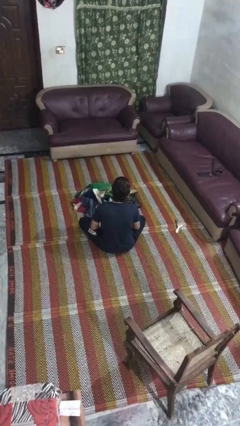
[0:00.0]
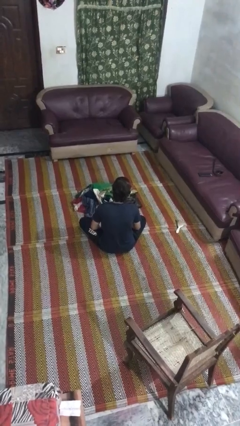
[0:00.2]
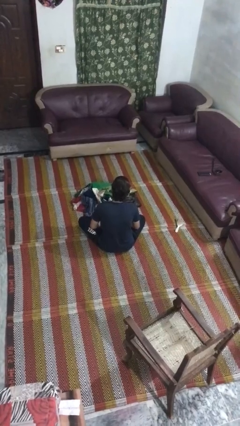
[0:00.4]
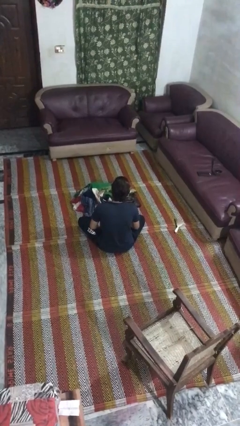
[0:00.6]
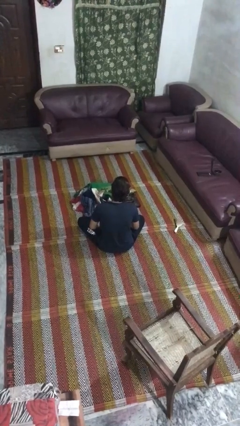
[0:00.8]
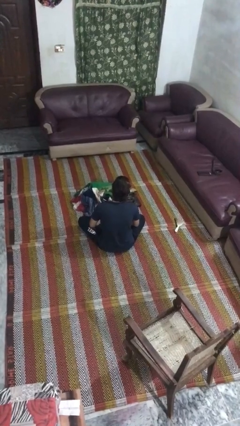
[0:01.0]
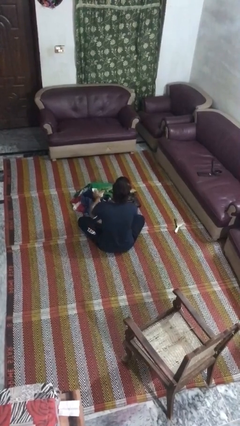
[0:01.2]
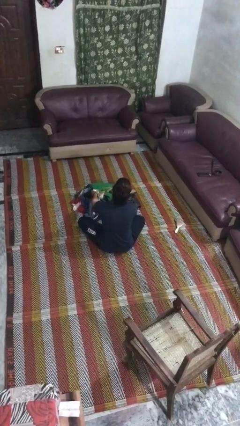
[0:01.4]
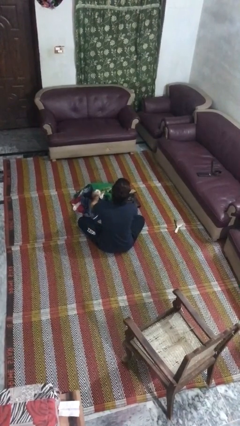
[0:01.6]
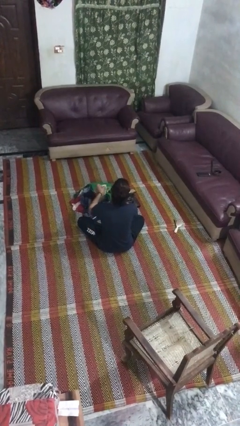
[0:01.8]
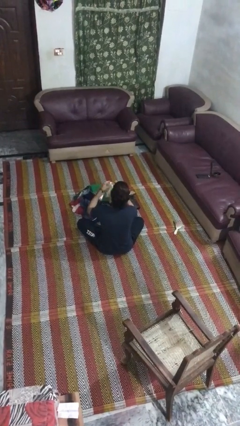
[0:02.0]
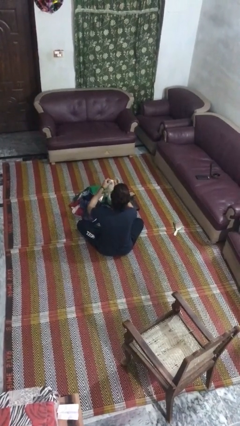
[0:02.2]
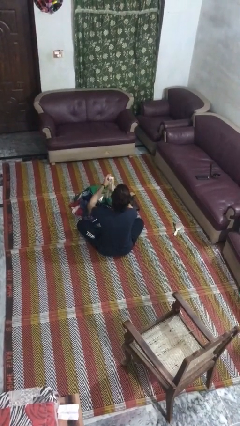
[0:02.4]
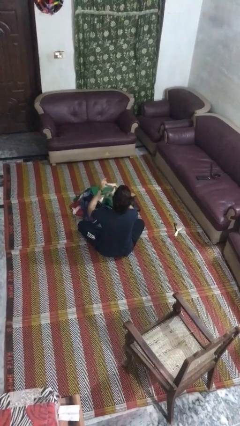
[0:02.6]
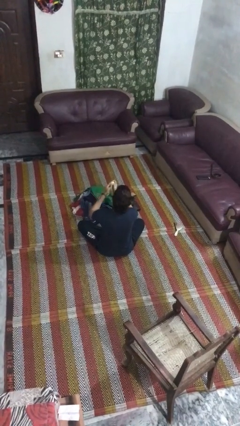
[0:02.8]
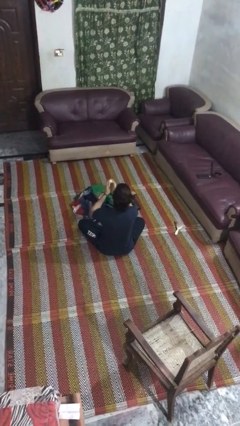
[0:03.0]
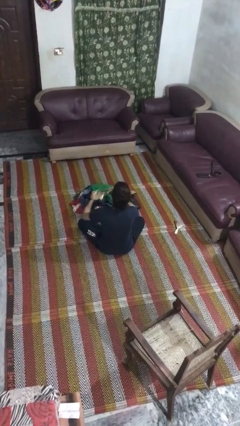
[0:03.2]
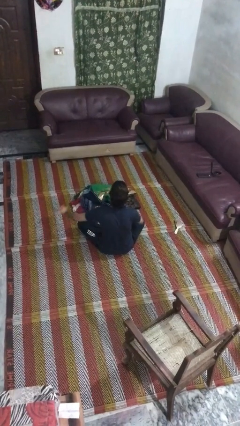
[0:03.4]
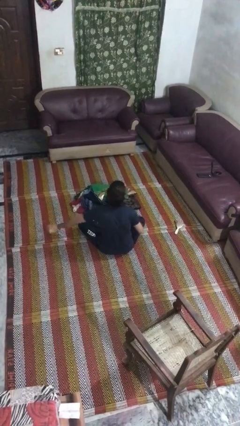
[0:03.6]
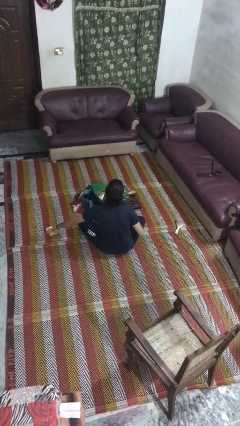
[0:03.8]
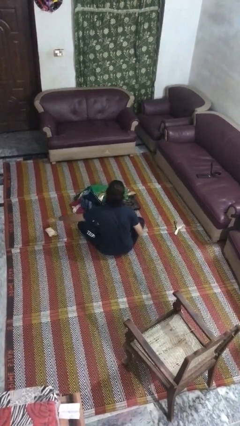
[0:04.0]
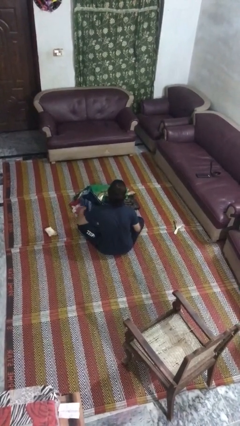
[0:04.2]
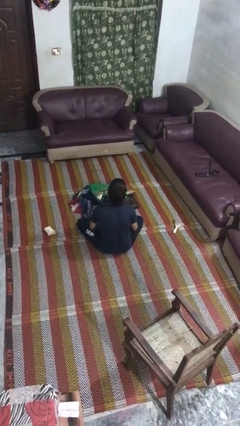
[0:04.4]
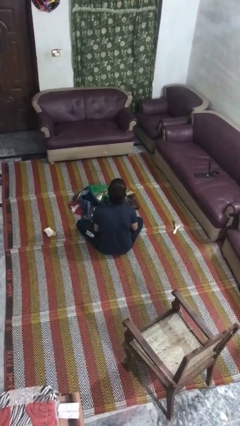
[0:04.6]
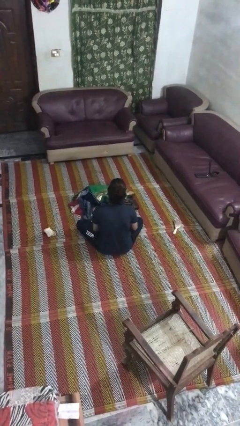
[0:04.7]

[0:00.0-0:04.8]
person folds socks

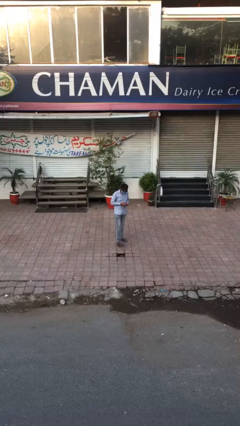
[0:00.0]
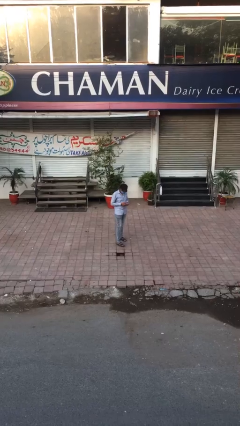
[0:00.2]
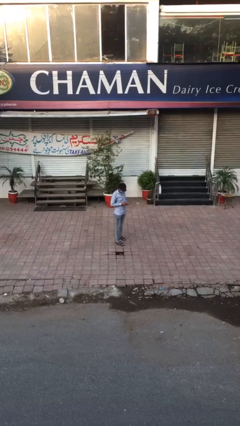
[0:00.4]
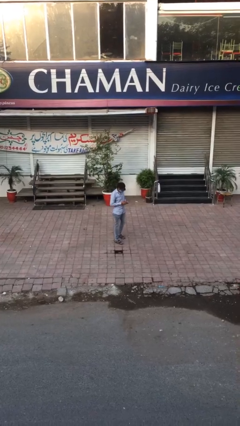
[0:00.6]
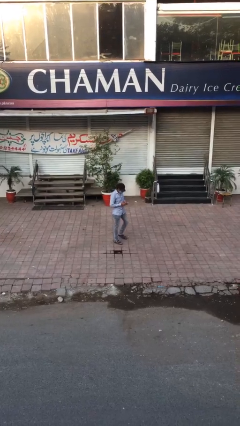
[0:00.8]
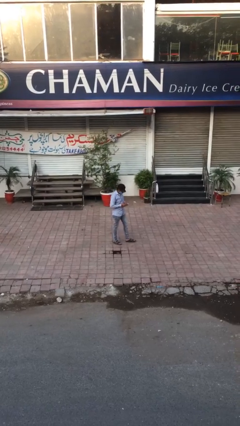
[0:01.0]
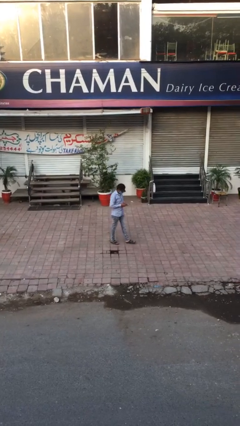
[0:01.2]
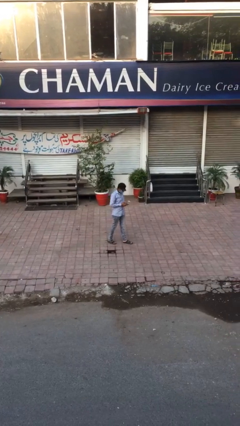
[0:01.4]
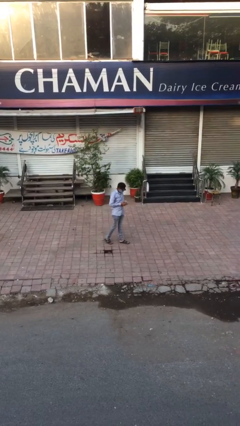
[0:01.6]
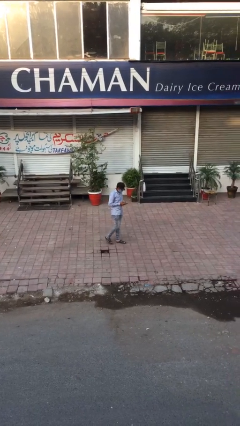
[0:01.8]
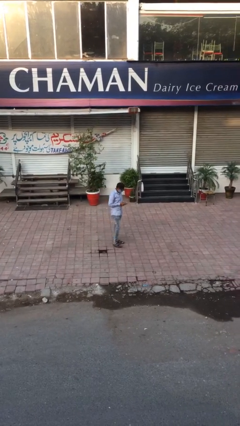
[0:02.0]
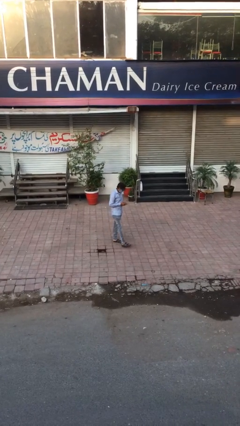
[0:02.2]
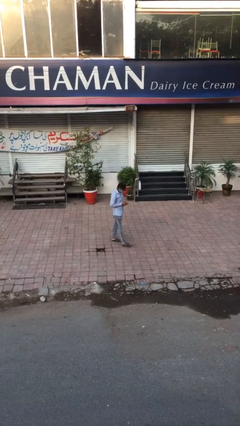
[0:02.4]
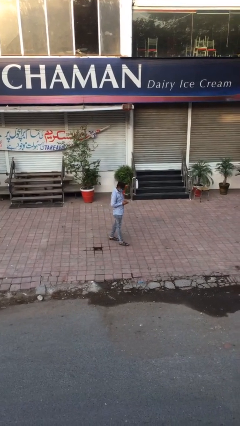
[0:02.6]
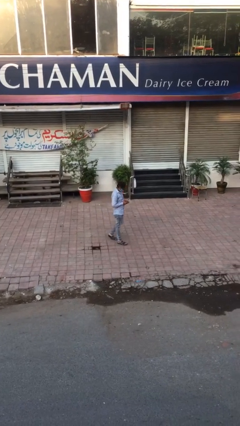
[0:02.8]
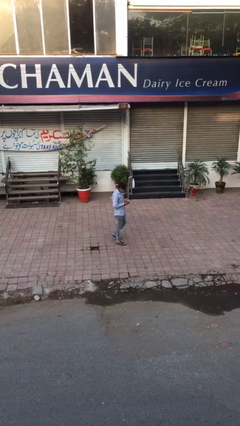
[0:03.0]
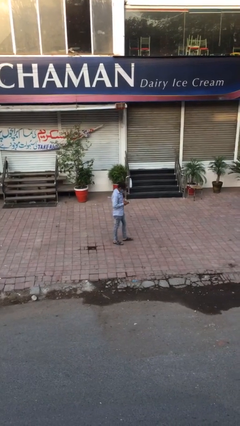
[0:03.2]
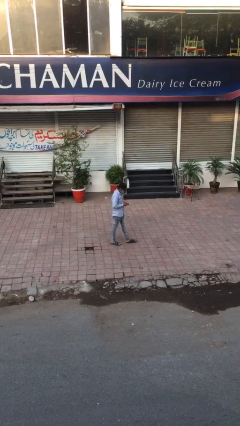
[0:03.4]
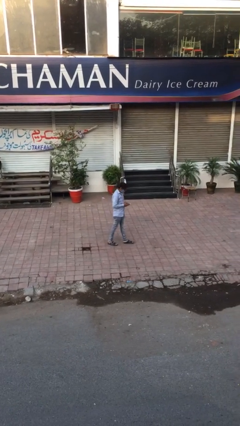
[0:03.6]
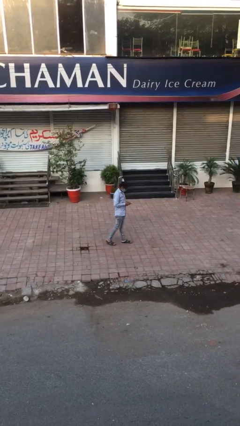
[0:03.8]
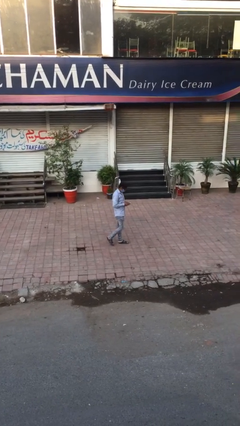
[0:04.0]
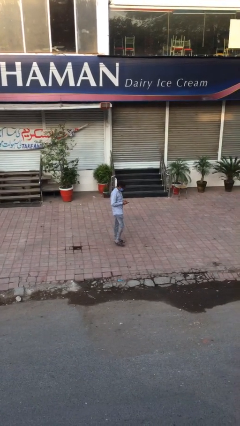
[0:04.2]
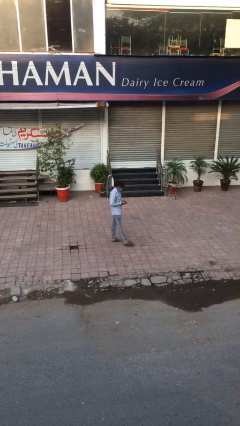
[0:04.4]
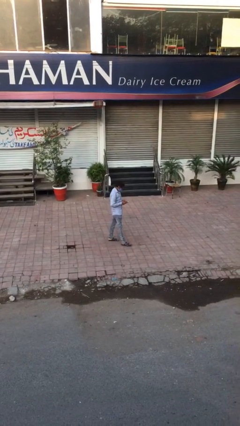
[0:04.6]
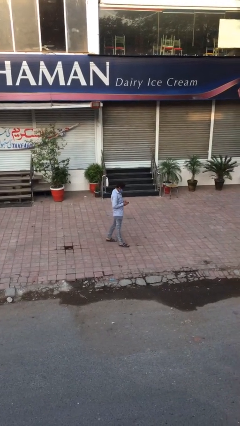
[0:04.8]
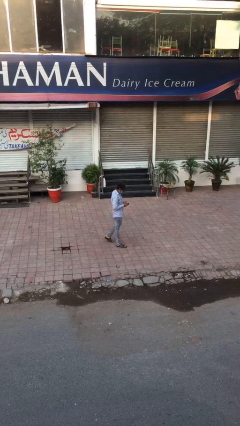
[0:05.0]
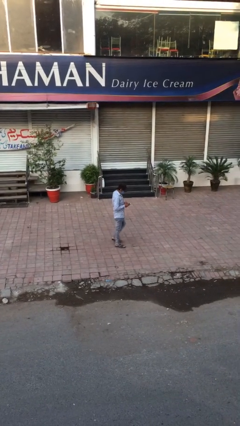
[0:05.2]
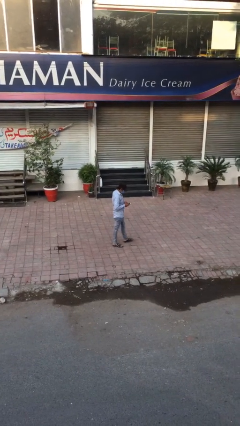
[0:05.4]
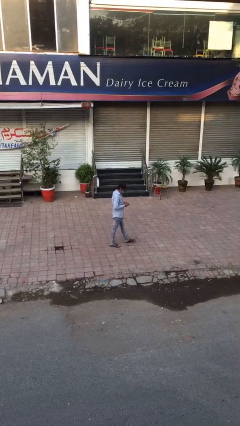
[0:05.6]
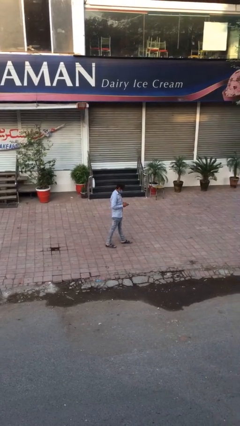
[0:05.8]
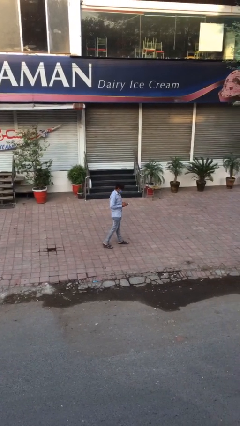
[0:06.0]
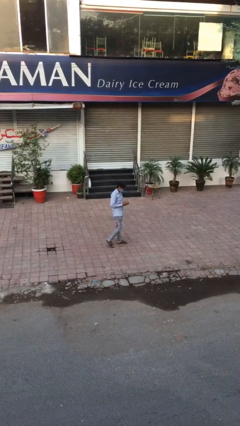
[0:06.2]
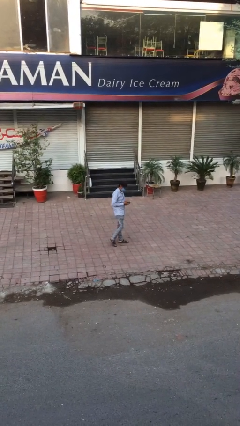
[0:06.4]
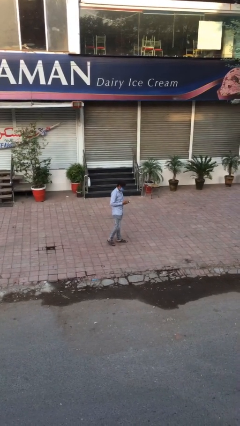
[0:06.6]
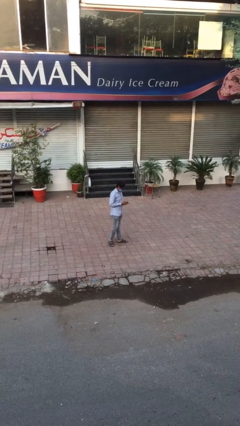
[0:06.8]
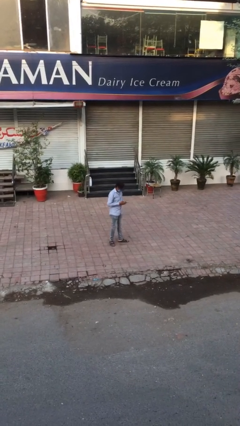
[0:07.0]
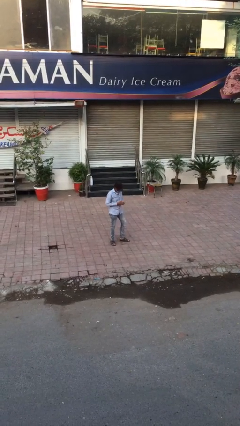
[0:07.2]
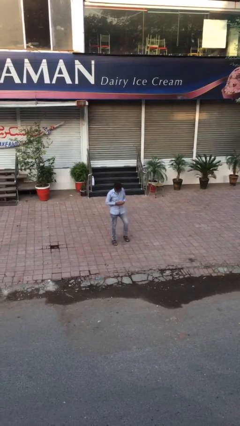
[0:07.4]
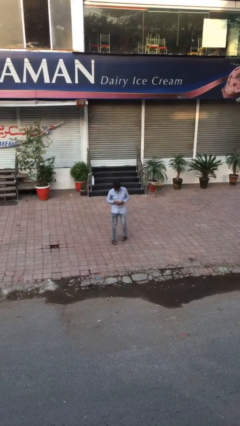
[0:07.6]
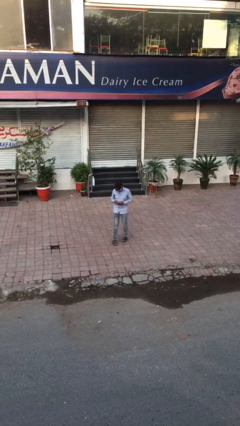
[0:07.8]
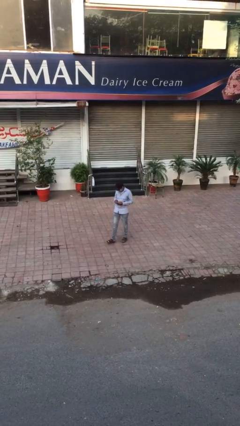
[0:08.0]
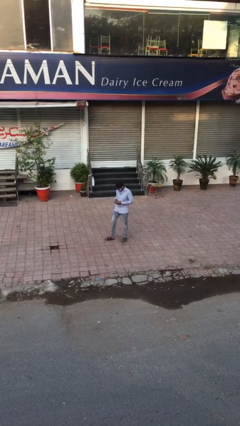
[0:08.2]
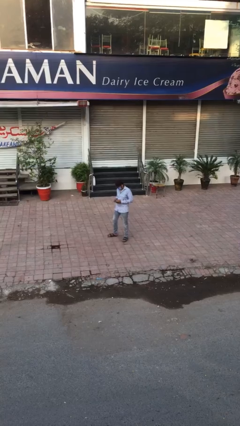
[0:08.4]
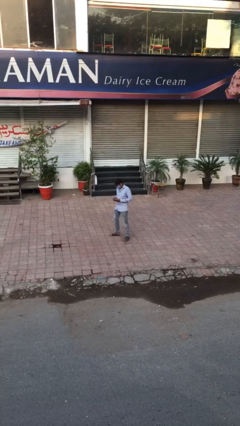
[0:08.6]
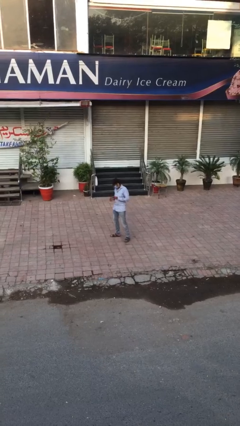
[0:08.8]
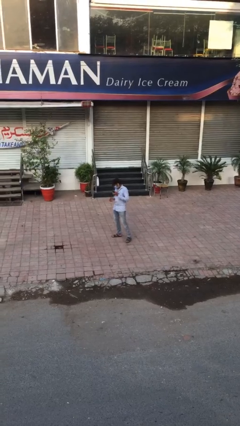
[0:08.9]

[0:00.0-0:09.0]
person texts on phone

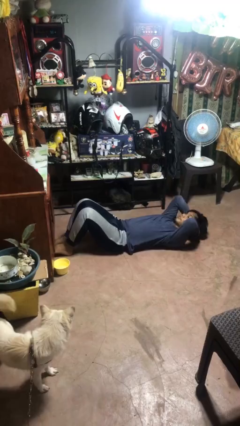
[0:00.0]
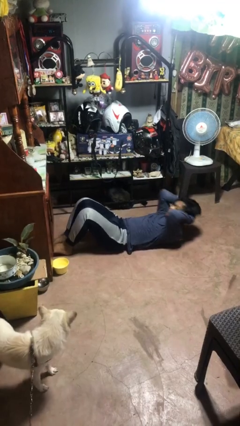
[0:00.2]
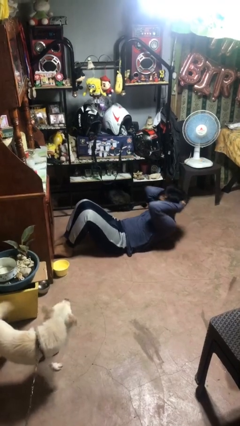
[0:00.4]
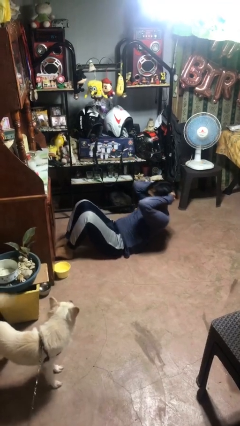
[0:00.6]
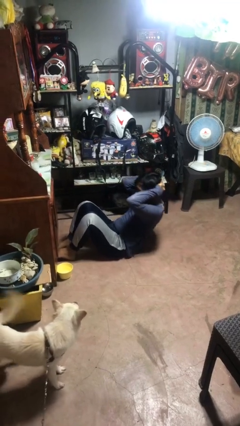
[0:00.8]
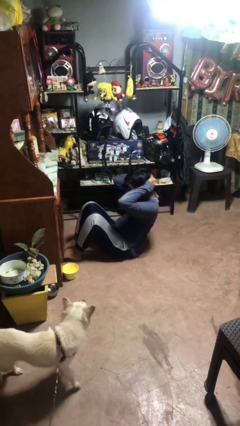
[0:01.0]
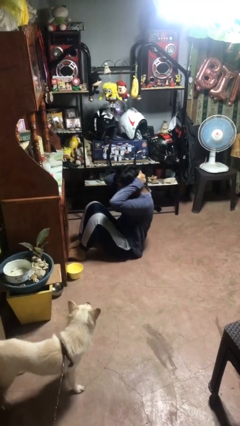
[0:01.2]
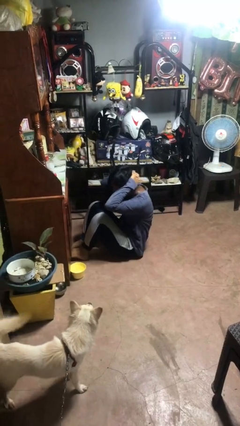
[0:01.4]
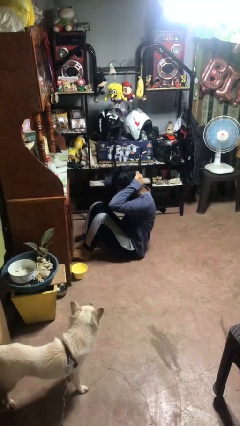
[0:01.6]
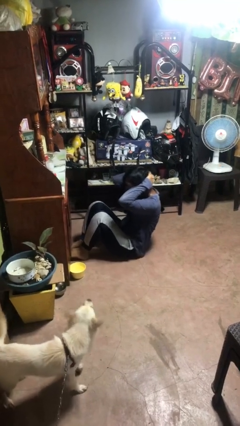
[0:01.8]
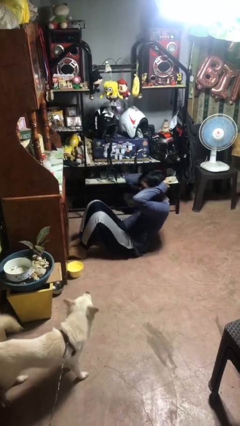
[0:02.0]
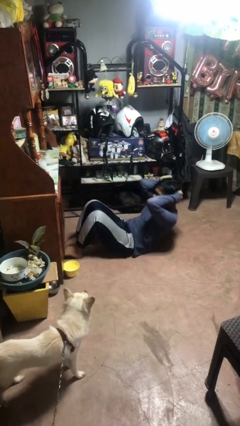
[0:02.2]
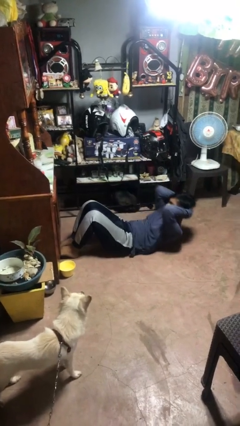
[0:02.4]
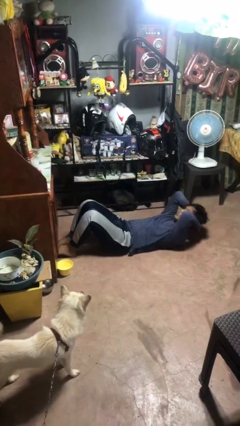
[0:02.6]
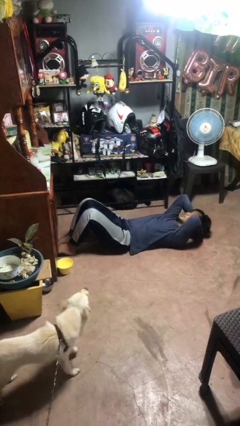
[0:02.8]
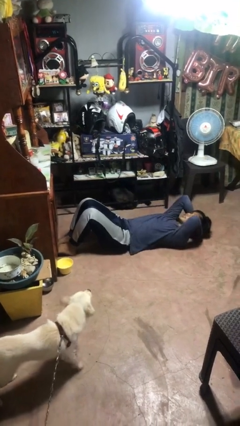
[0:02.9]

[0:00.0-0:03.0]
person exercises with situp

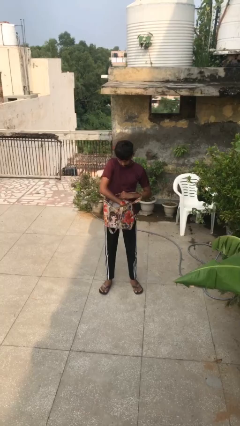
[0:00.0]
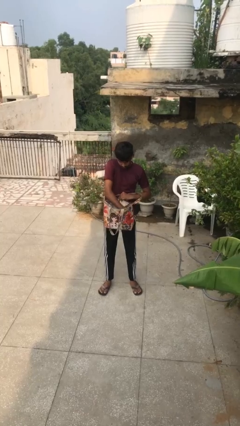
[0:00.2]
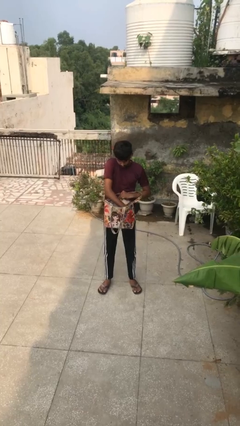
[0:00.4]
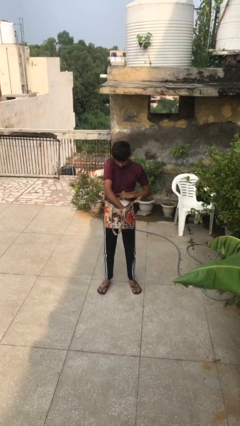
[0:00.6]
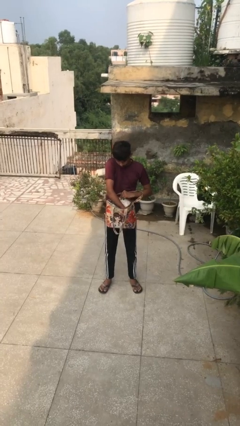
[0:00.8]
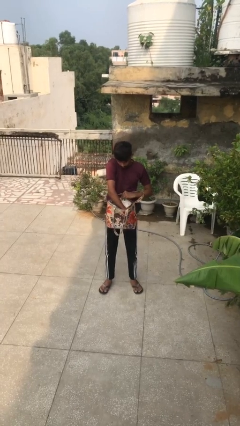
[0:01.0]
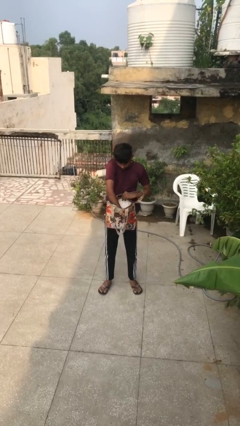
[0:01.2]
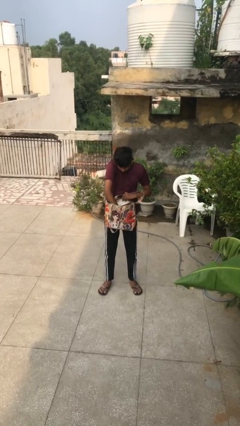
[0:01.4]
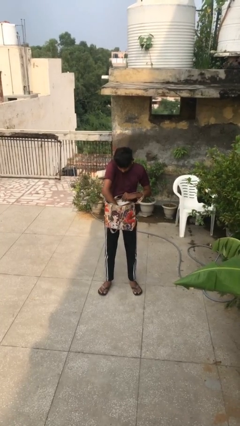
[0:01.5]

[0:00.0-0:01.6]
person puts object into purse
